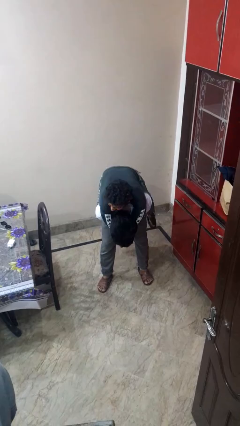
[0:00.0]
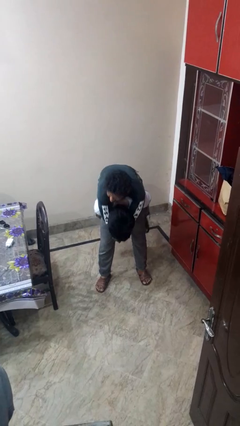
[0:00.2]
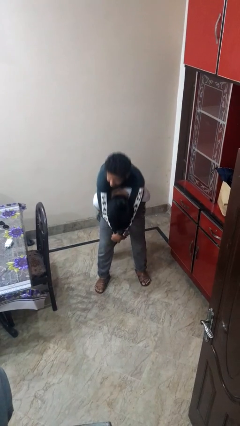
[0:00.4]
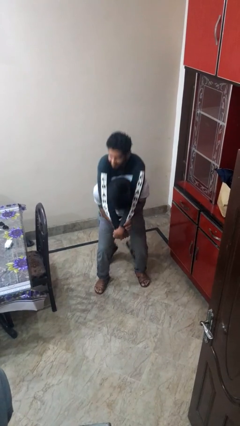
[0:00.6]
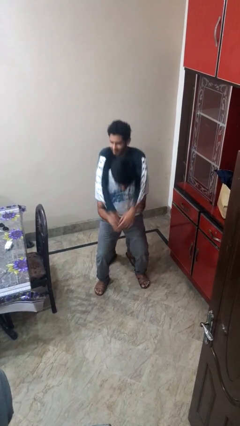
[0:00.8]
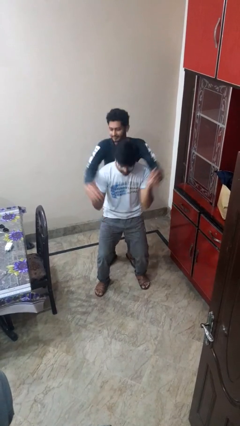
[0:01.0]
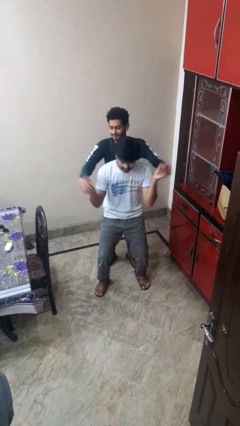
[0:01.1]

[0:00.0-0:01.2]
person puts down person

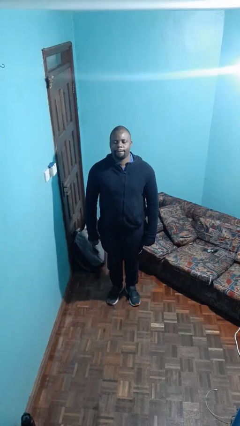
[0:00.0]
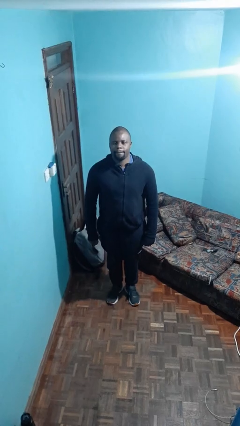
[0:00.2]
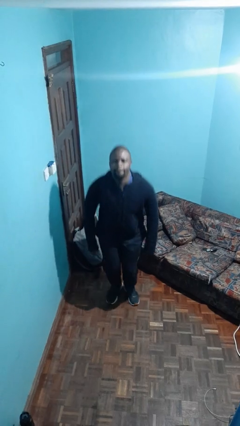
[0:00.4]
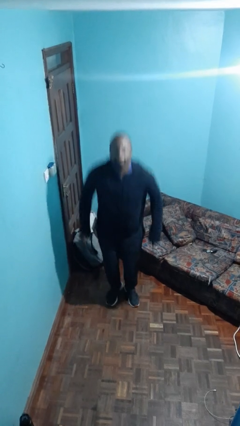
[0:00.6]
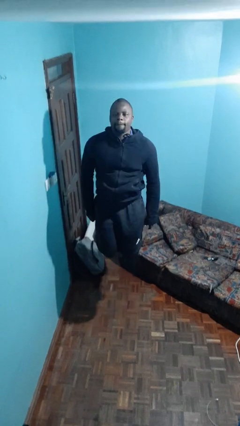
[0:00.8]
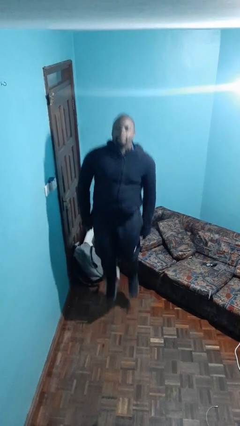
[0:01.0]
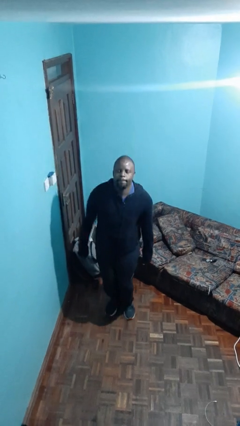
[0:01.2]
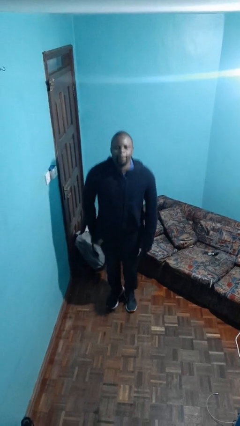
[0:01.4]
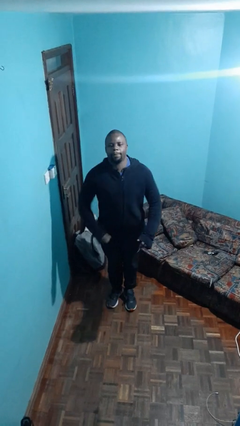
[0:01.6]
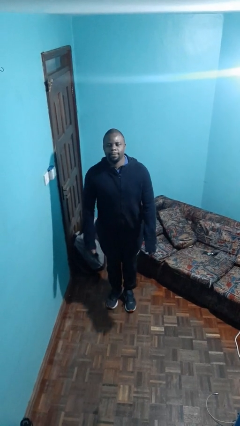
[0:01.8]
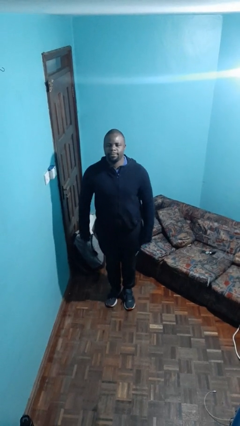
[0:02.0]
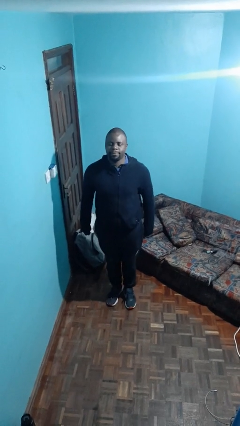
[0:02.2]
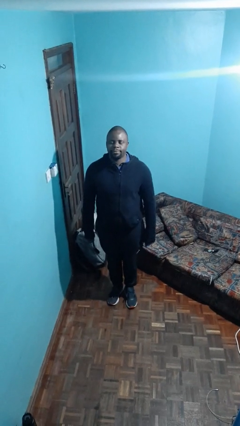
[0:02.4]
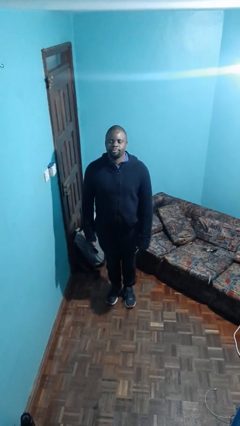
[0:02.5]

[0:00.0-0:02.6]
person jumps

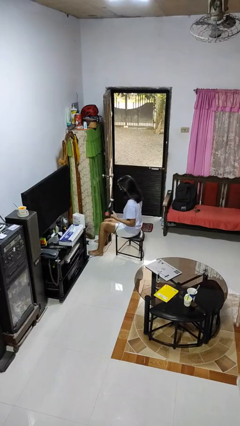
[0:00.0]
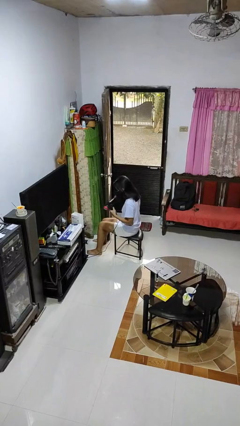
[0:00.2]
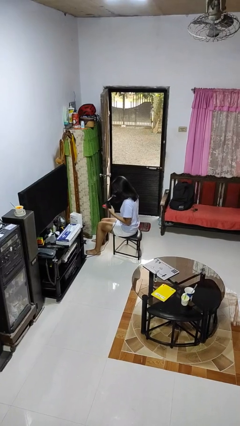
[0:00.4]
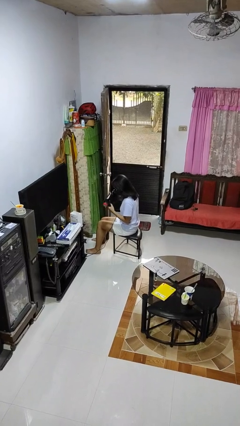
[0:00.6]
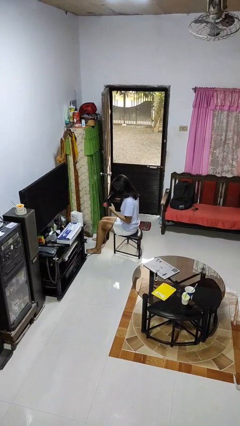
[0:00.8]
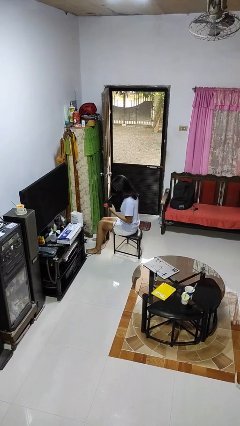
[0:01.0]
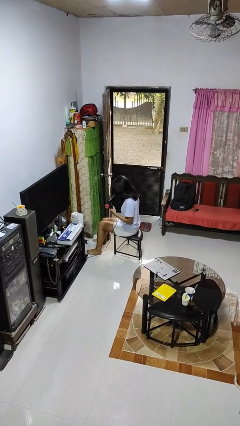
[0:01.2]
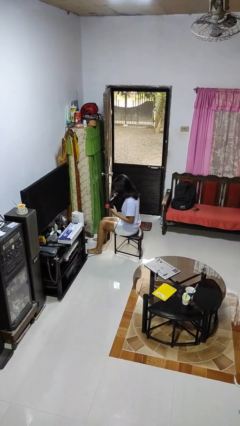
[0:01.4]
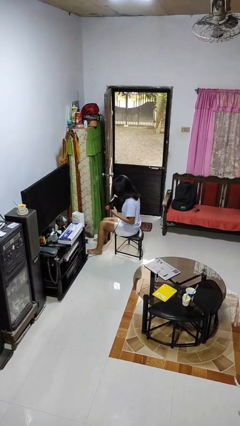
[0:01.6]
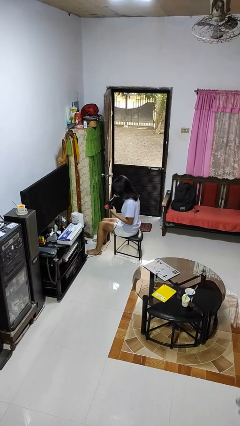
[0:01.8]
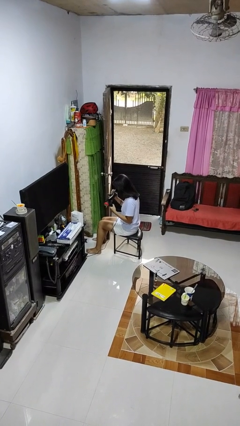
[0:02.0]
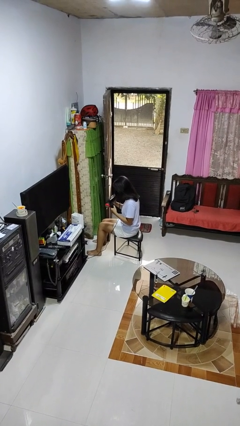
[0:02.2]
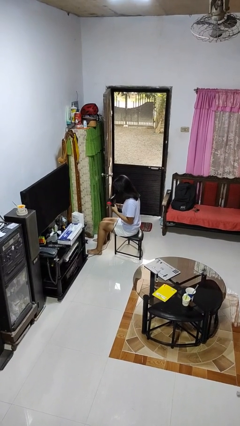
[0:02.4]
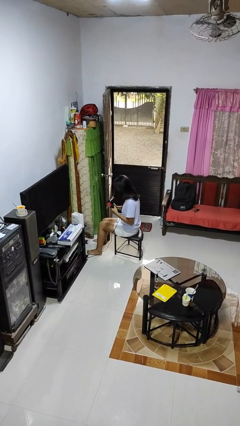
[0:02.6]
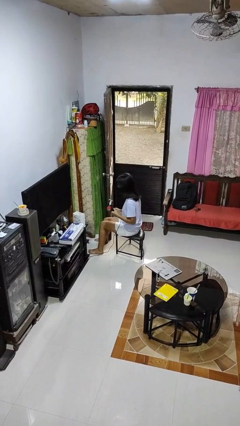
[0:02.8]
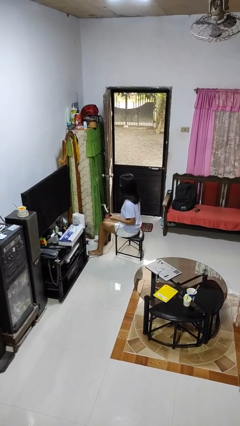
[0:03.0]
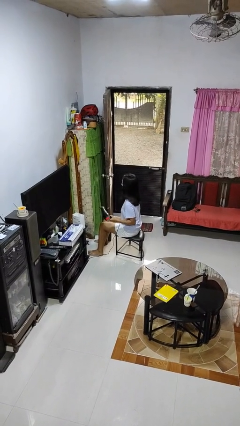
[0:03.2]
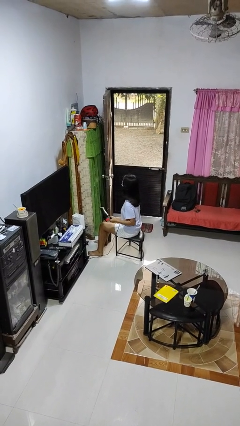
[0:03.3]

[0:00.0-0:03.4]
person dries hair with hairdryer

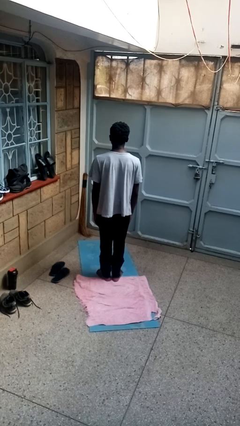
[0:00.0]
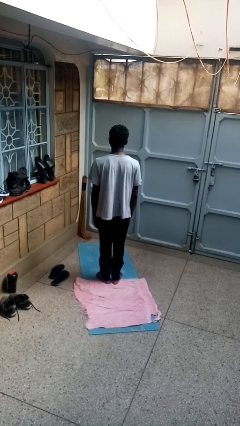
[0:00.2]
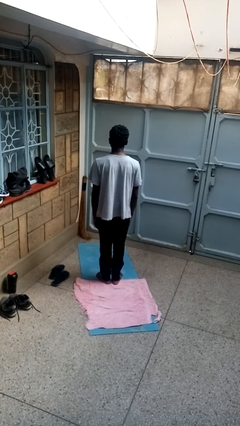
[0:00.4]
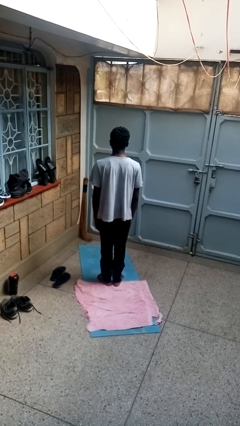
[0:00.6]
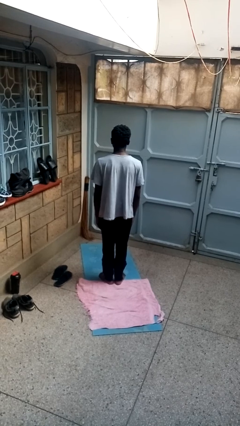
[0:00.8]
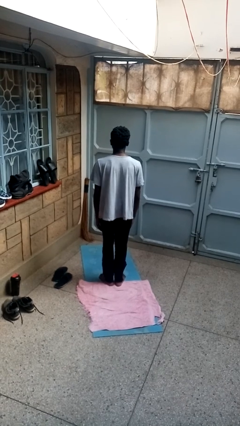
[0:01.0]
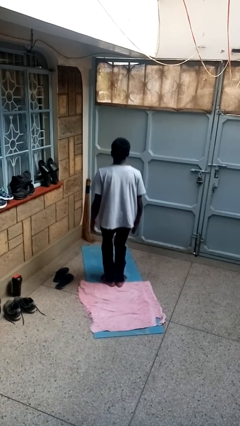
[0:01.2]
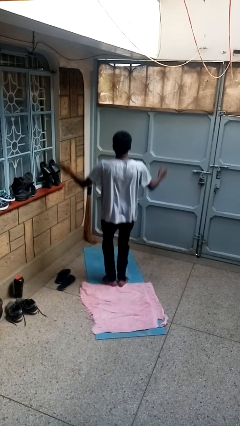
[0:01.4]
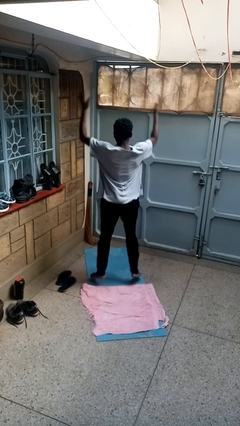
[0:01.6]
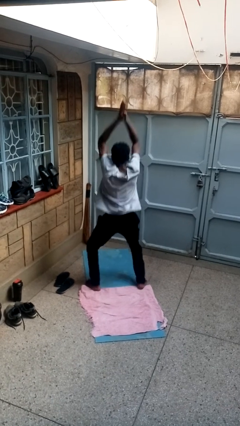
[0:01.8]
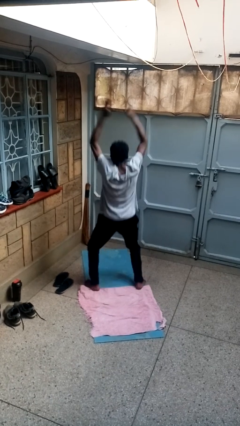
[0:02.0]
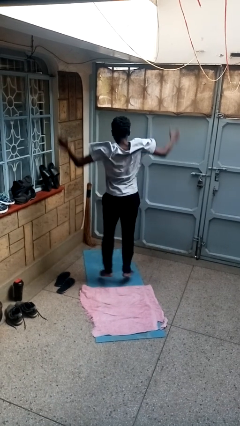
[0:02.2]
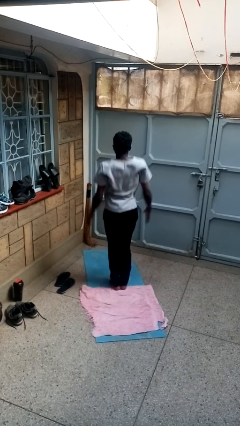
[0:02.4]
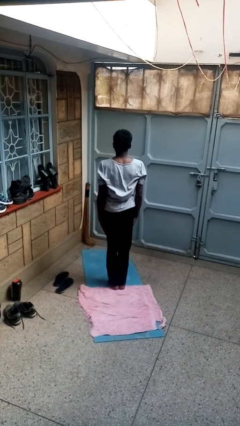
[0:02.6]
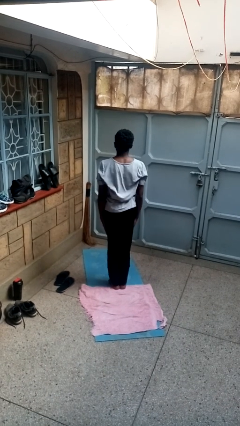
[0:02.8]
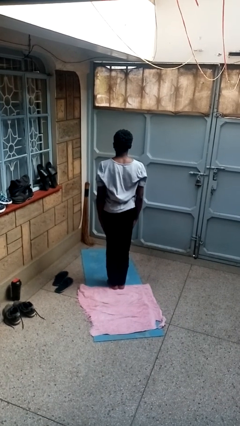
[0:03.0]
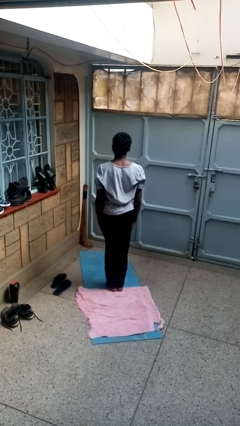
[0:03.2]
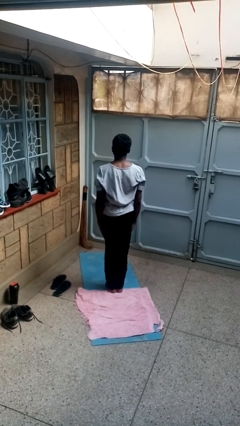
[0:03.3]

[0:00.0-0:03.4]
person exercises with jumping jacks

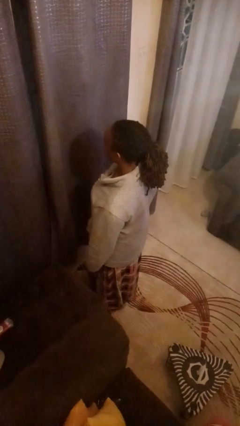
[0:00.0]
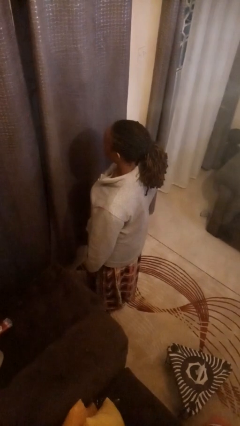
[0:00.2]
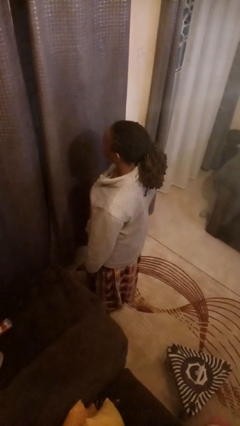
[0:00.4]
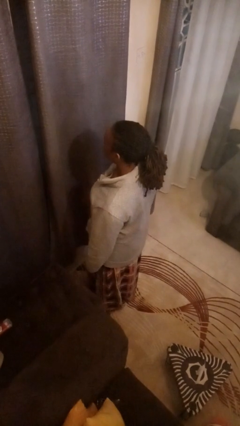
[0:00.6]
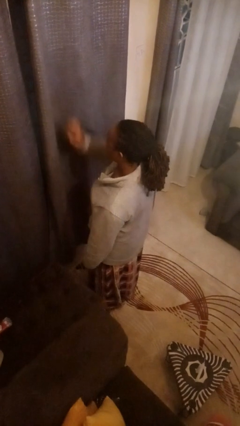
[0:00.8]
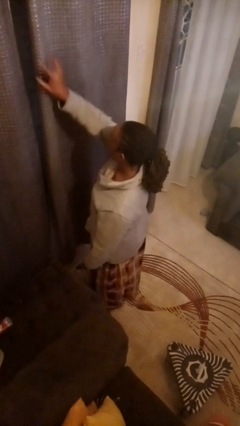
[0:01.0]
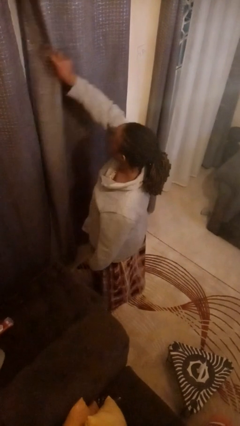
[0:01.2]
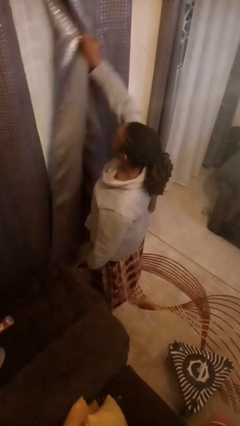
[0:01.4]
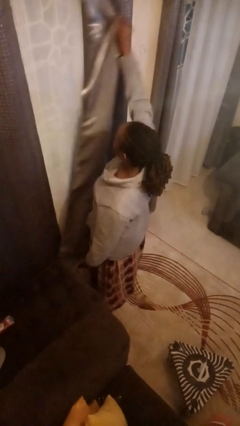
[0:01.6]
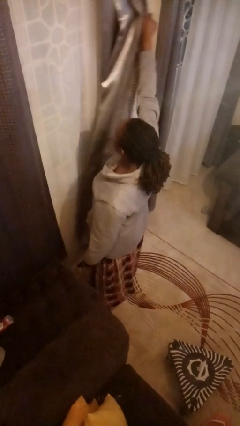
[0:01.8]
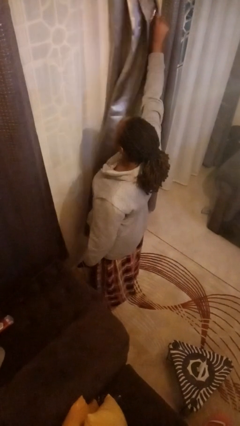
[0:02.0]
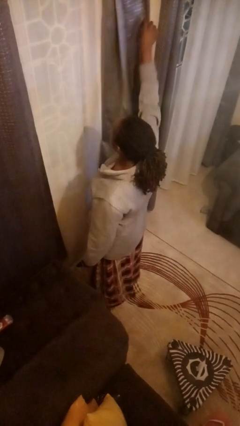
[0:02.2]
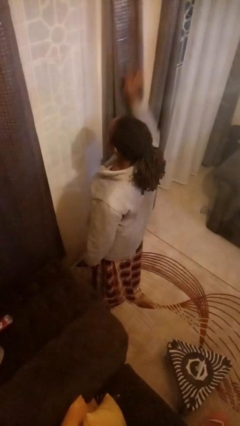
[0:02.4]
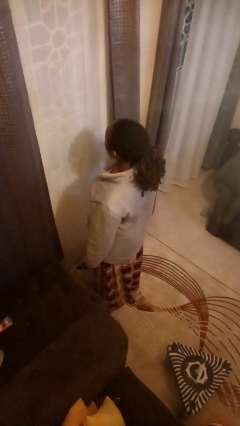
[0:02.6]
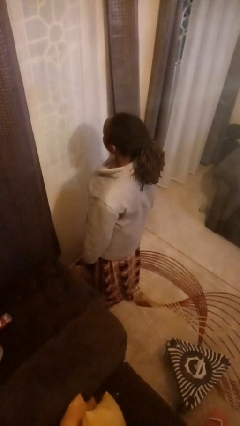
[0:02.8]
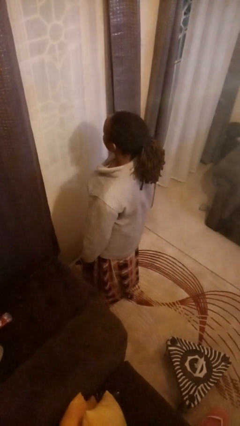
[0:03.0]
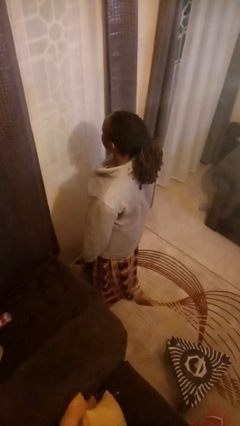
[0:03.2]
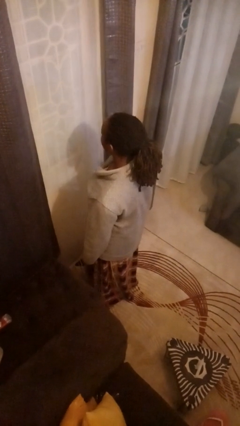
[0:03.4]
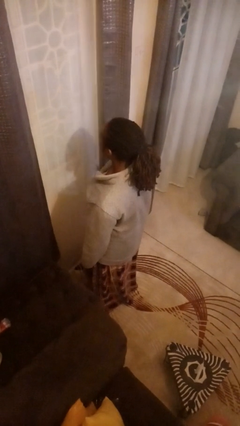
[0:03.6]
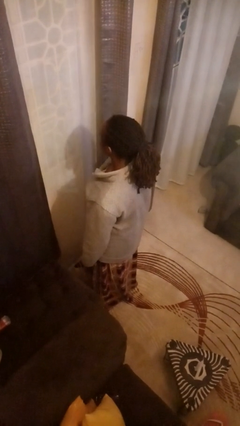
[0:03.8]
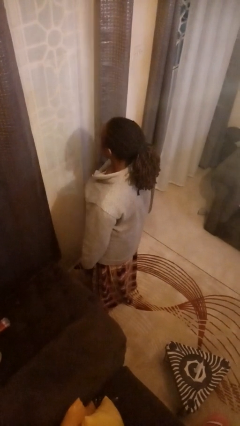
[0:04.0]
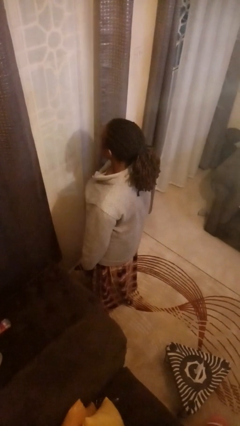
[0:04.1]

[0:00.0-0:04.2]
person opens curtains

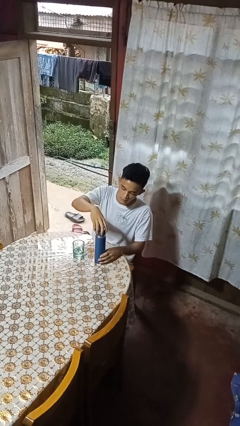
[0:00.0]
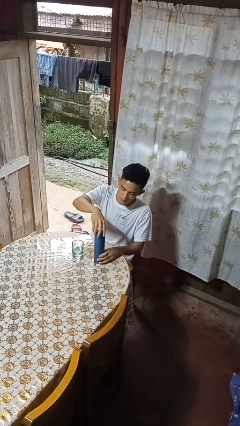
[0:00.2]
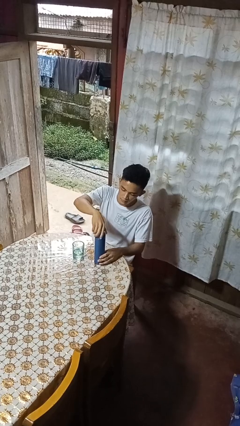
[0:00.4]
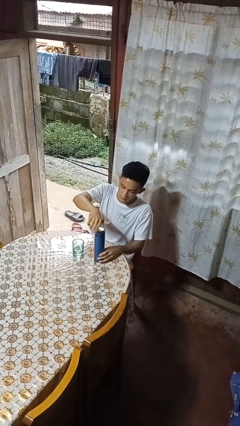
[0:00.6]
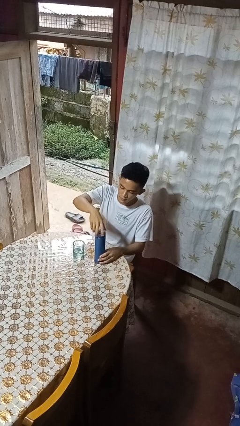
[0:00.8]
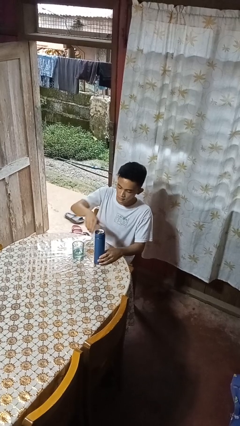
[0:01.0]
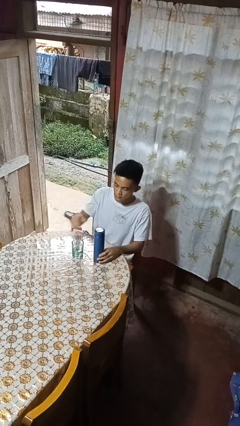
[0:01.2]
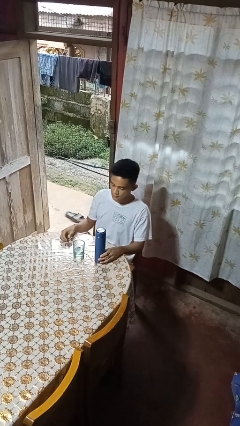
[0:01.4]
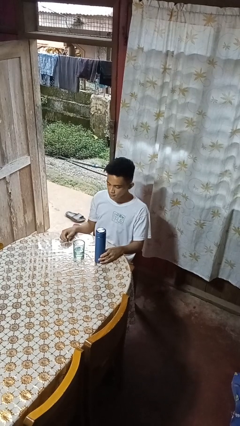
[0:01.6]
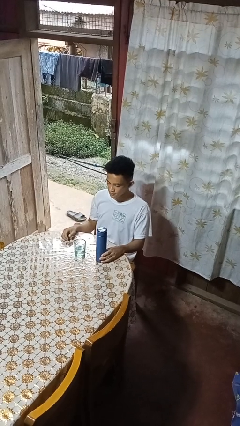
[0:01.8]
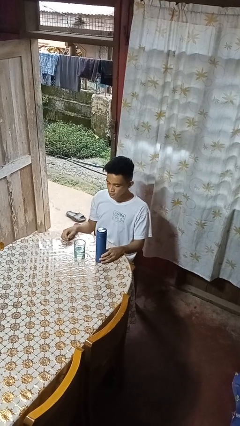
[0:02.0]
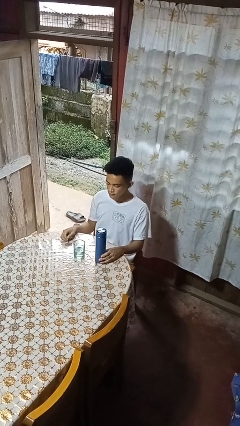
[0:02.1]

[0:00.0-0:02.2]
person screws lid to bottle

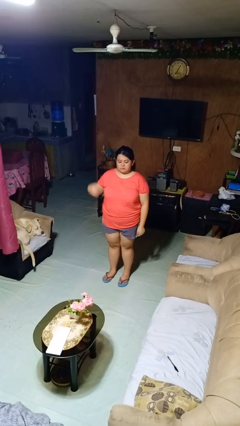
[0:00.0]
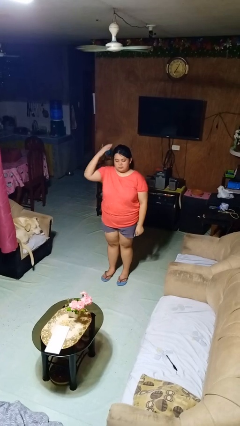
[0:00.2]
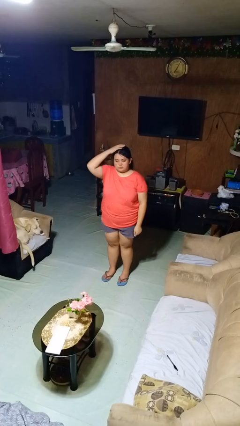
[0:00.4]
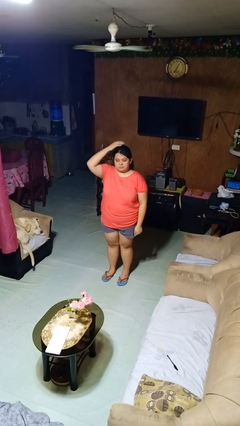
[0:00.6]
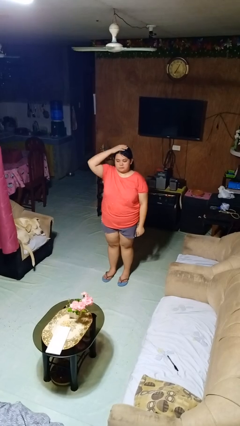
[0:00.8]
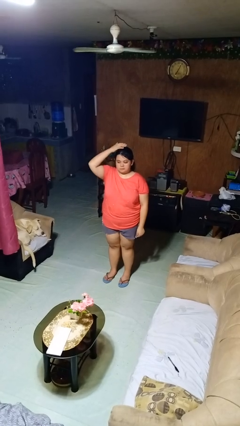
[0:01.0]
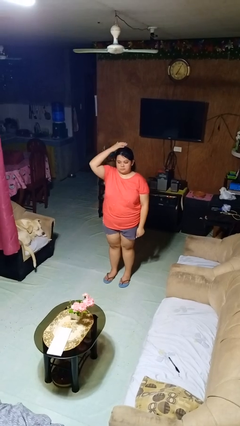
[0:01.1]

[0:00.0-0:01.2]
person pats head
